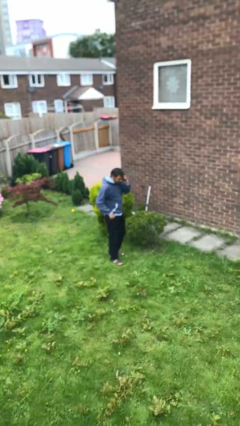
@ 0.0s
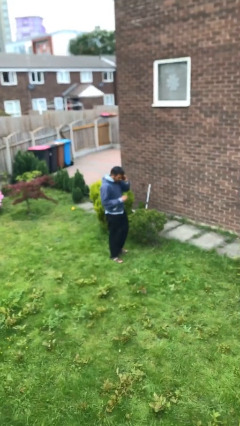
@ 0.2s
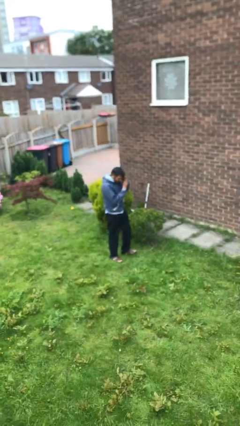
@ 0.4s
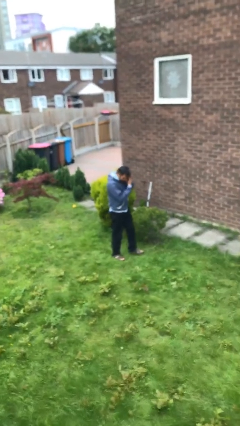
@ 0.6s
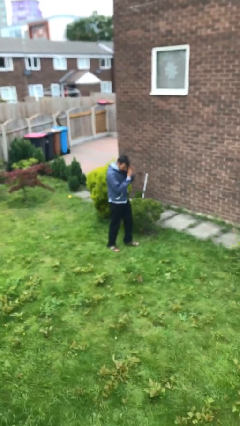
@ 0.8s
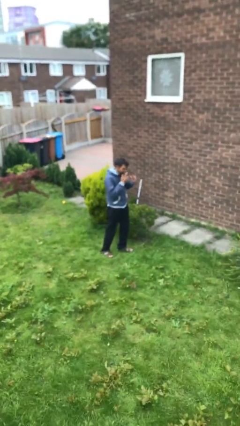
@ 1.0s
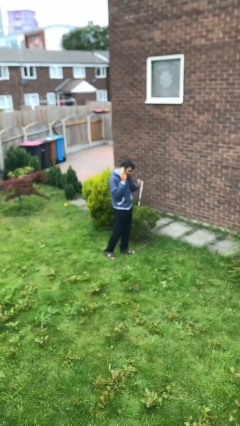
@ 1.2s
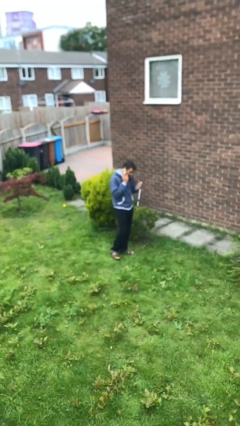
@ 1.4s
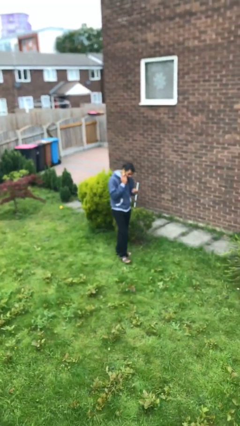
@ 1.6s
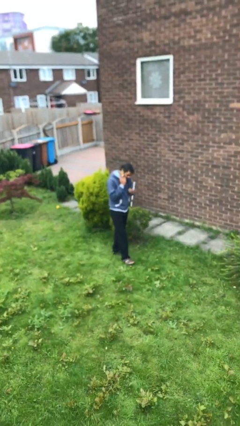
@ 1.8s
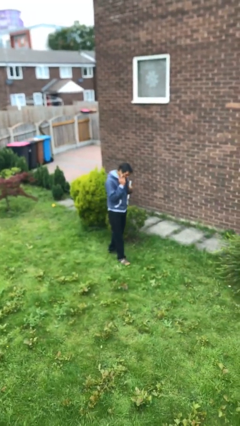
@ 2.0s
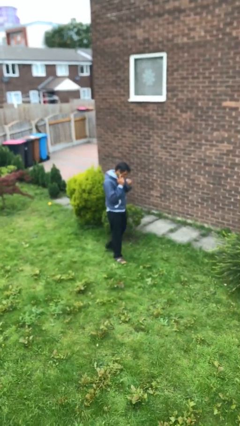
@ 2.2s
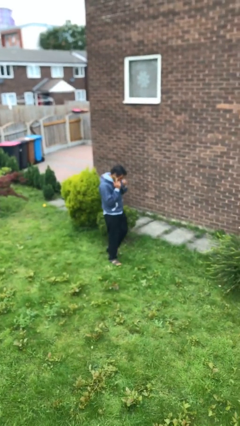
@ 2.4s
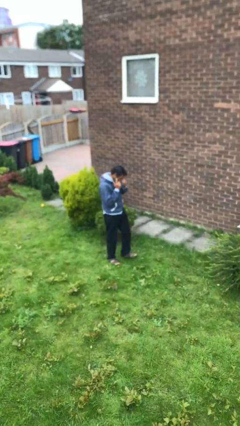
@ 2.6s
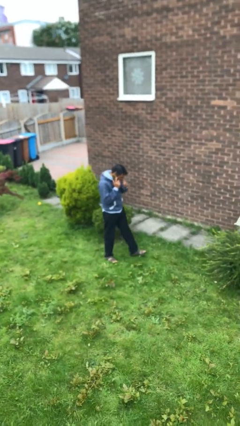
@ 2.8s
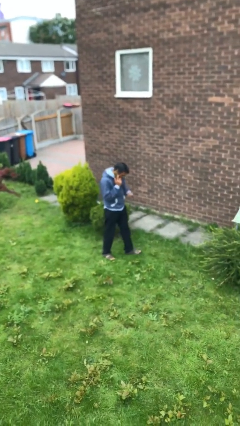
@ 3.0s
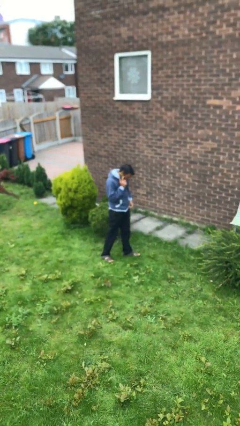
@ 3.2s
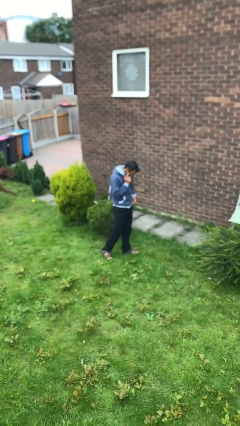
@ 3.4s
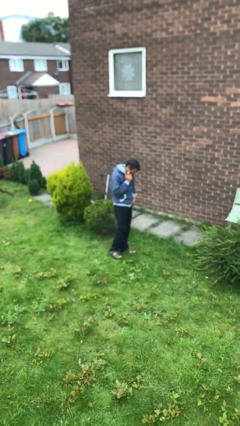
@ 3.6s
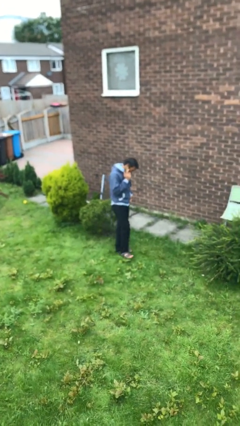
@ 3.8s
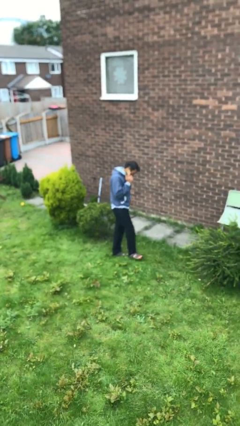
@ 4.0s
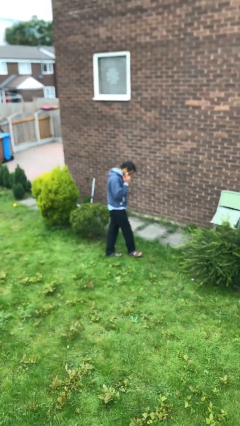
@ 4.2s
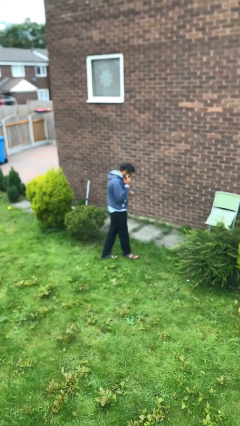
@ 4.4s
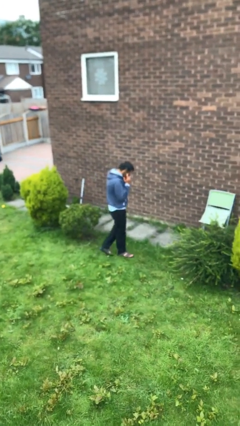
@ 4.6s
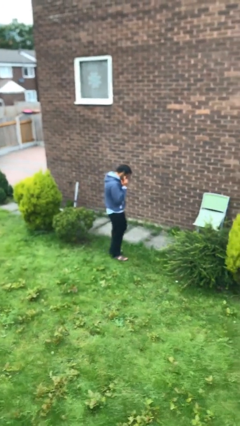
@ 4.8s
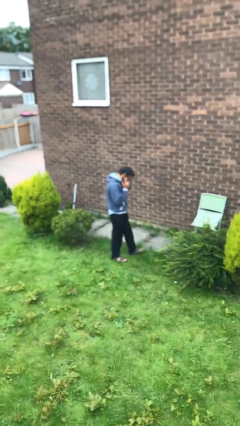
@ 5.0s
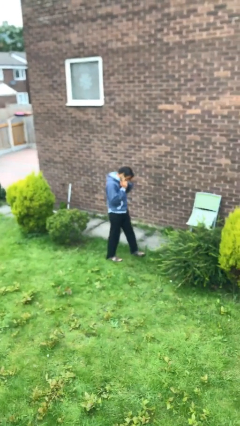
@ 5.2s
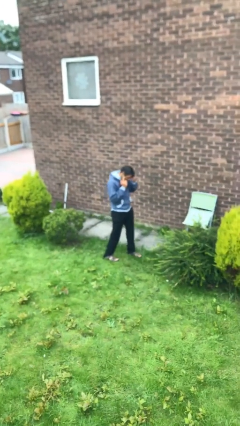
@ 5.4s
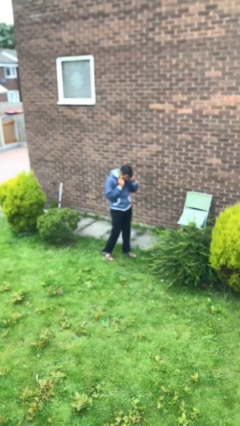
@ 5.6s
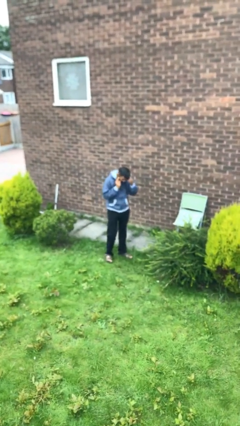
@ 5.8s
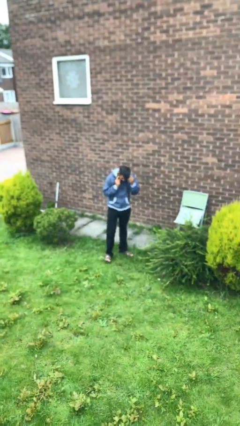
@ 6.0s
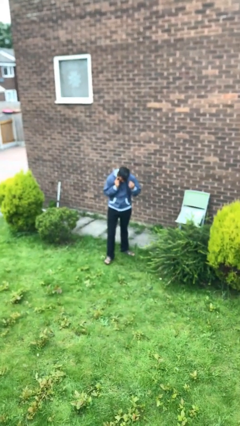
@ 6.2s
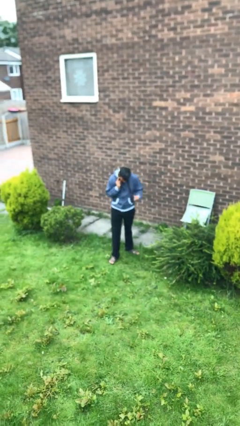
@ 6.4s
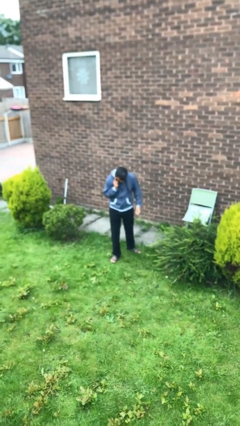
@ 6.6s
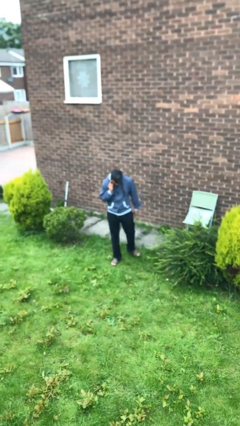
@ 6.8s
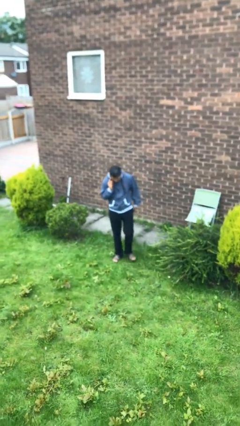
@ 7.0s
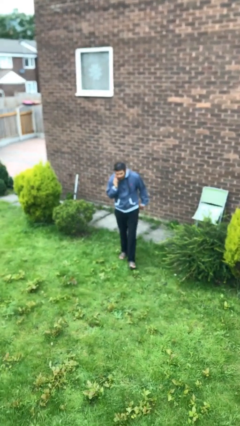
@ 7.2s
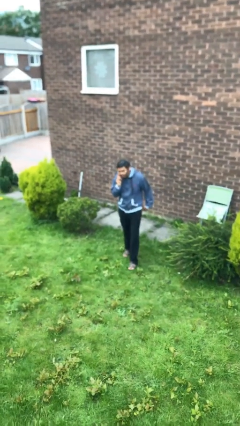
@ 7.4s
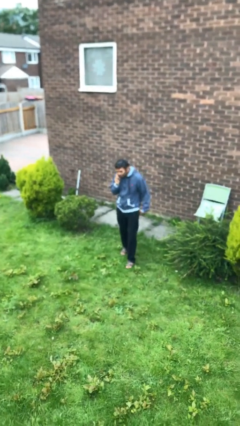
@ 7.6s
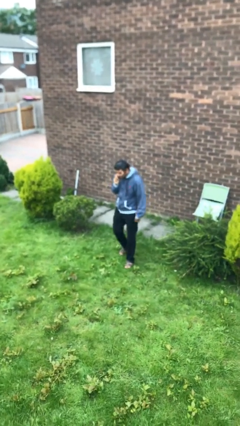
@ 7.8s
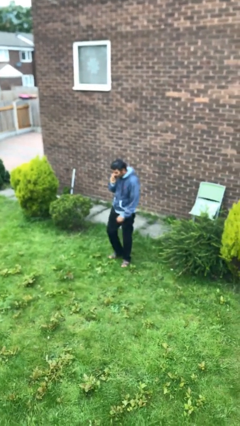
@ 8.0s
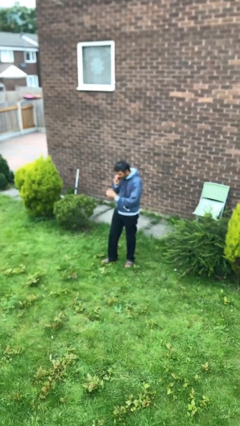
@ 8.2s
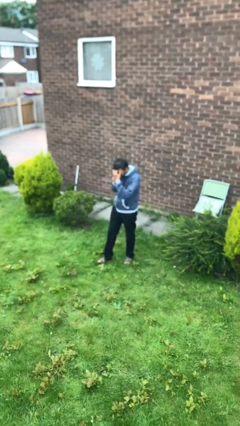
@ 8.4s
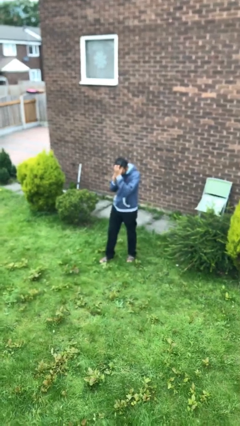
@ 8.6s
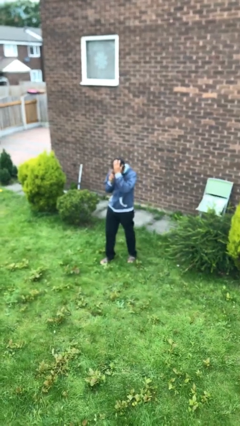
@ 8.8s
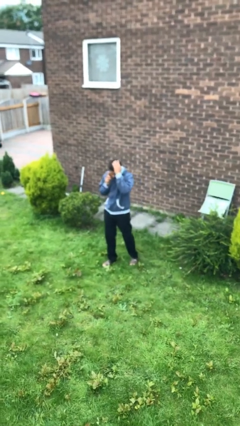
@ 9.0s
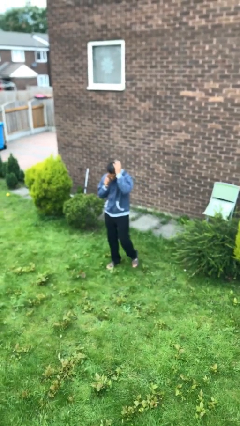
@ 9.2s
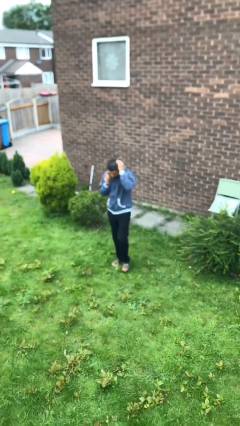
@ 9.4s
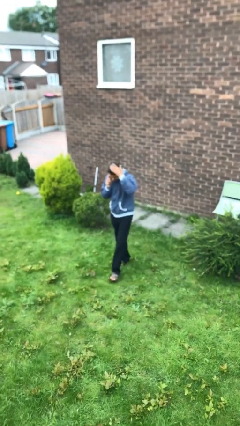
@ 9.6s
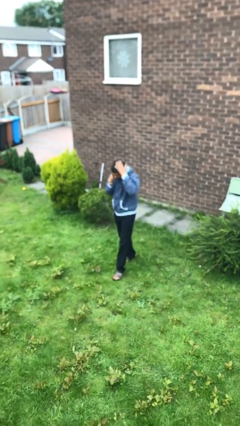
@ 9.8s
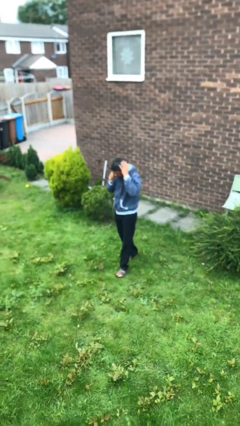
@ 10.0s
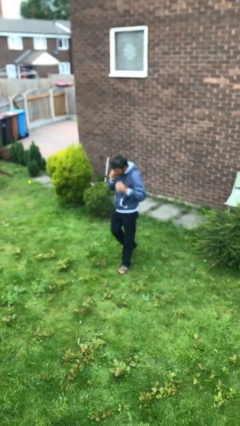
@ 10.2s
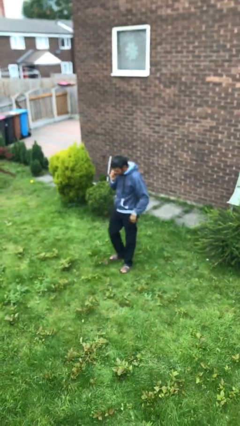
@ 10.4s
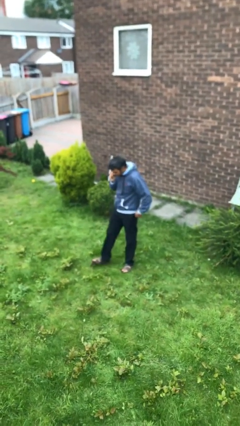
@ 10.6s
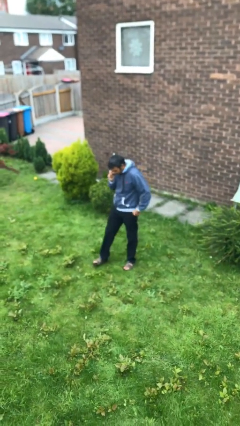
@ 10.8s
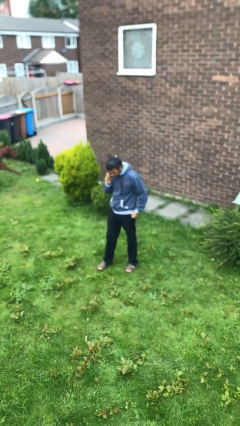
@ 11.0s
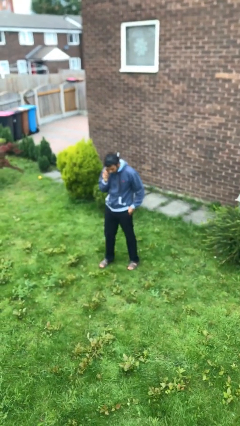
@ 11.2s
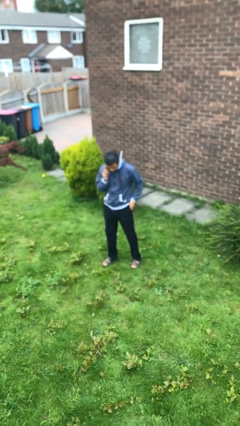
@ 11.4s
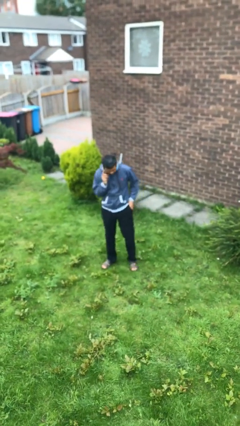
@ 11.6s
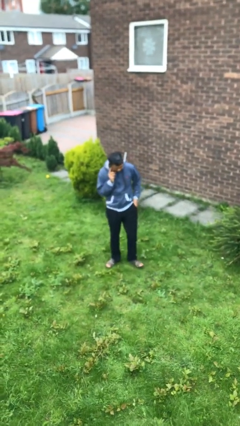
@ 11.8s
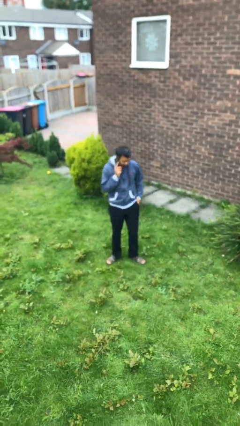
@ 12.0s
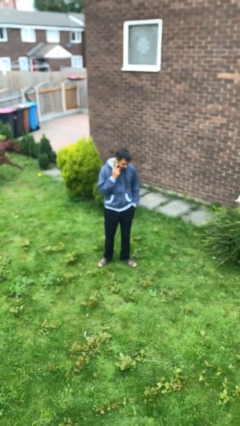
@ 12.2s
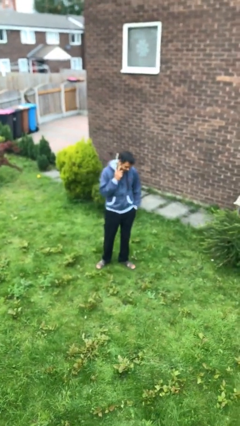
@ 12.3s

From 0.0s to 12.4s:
person talks on phone

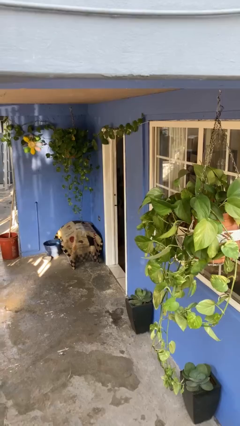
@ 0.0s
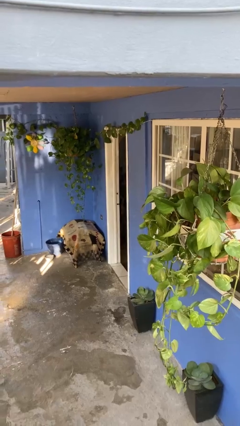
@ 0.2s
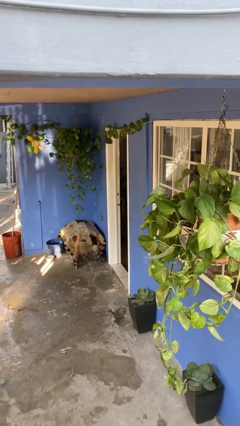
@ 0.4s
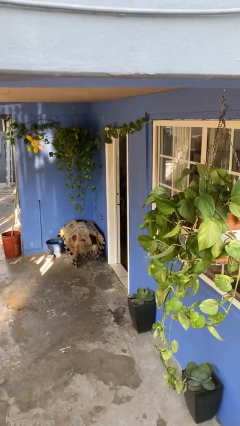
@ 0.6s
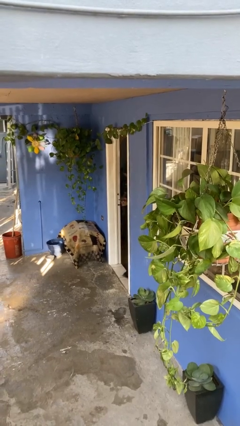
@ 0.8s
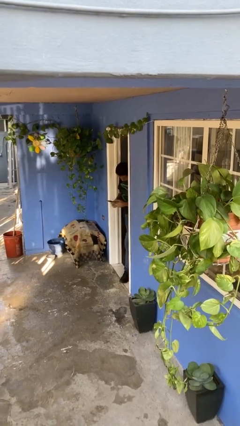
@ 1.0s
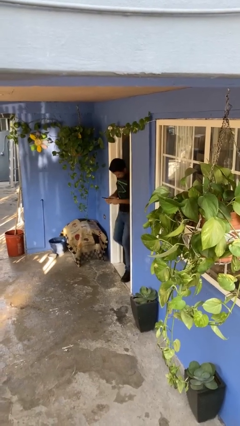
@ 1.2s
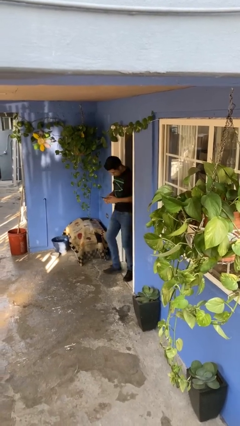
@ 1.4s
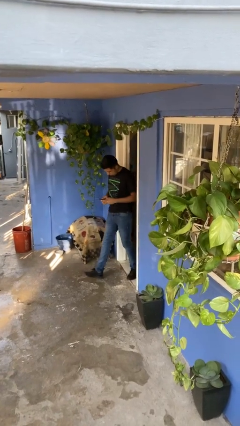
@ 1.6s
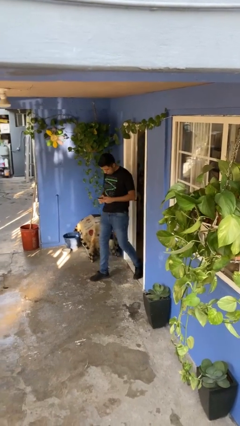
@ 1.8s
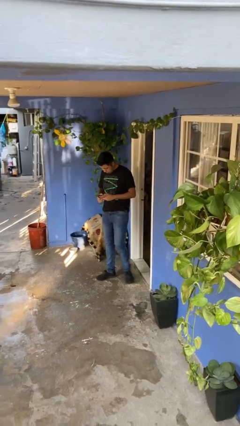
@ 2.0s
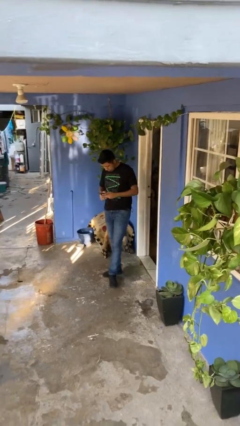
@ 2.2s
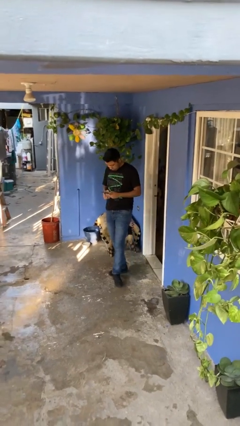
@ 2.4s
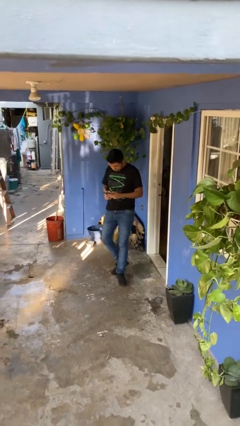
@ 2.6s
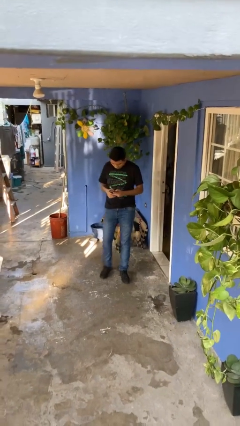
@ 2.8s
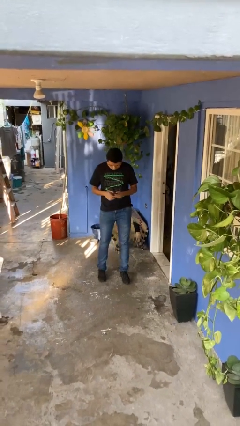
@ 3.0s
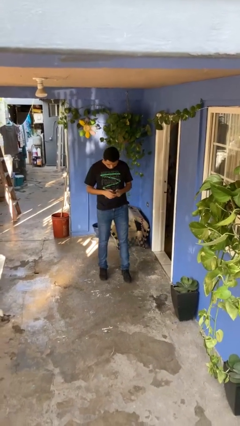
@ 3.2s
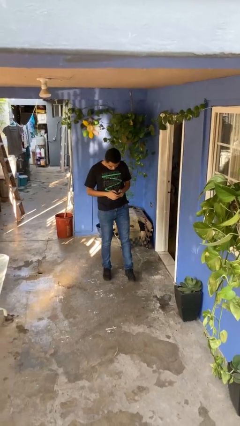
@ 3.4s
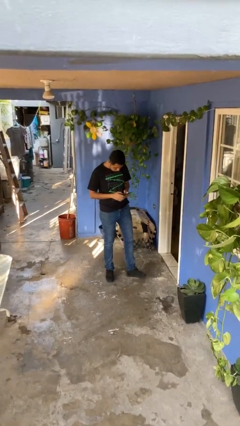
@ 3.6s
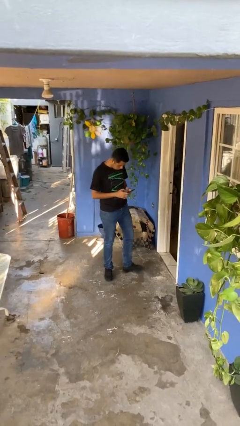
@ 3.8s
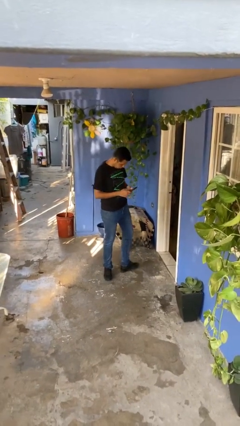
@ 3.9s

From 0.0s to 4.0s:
person enters scene through structure

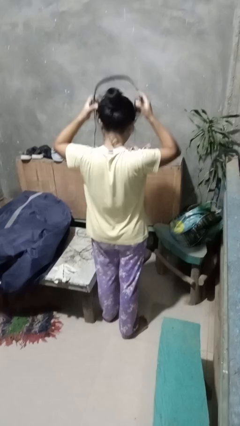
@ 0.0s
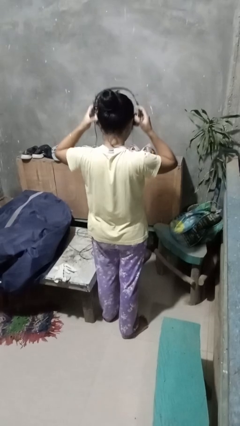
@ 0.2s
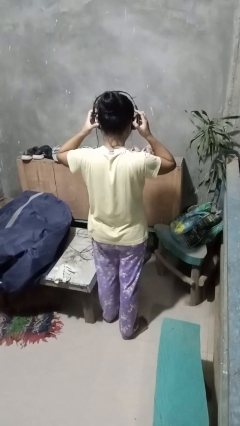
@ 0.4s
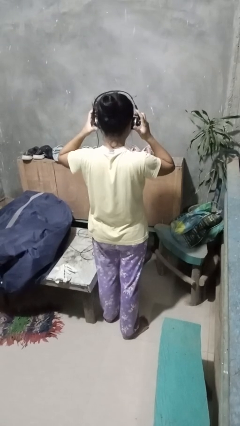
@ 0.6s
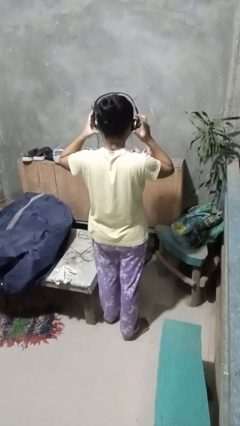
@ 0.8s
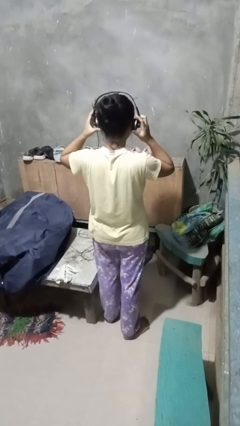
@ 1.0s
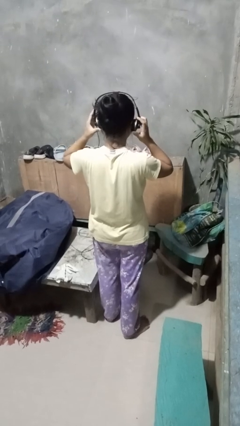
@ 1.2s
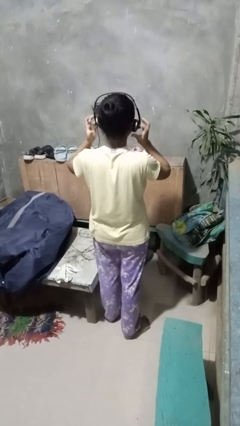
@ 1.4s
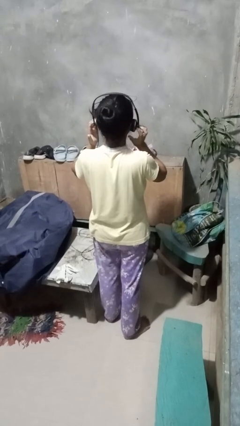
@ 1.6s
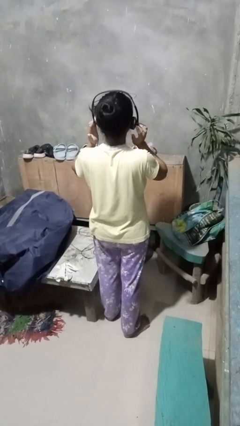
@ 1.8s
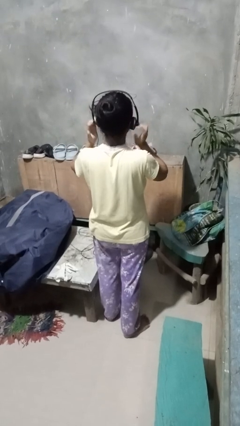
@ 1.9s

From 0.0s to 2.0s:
person puts on headphones
